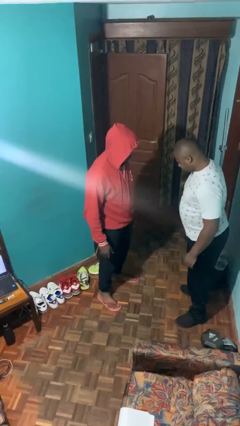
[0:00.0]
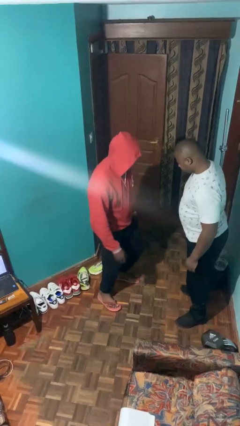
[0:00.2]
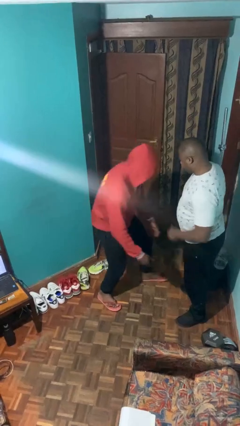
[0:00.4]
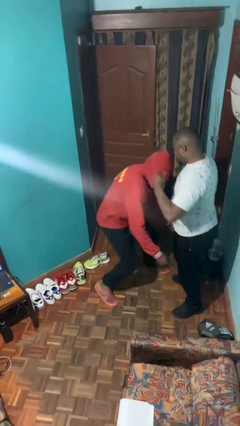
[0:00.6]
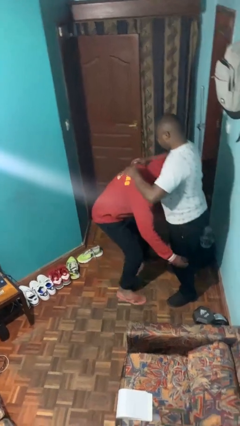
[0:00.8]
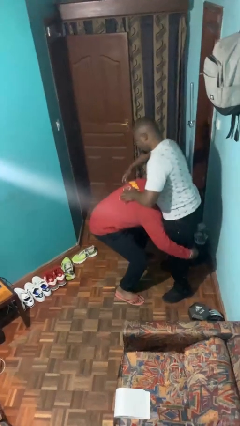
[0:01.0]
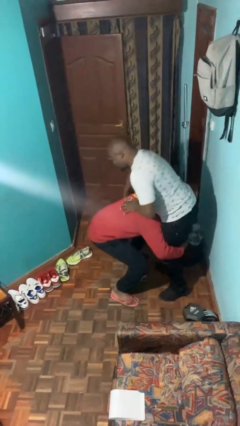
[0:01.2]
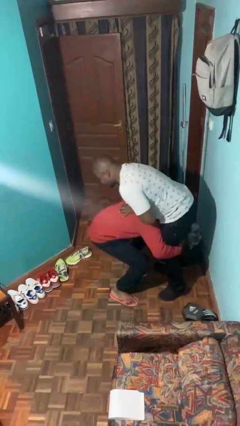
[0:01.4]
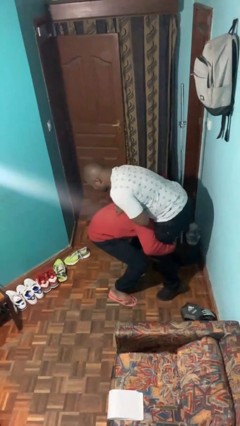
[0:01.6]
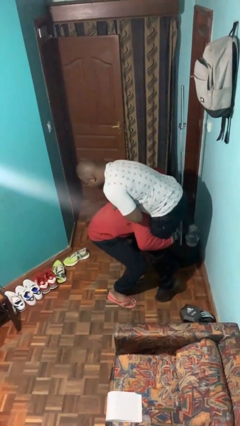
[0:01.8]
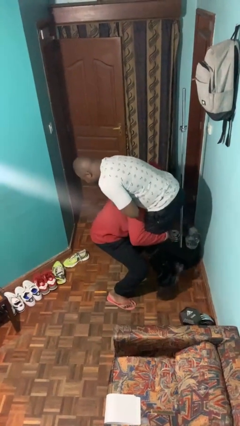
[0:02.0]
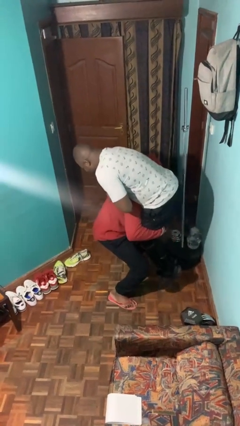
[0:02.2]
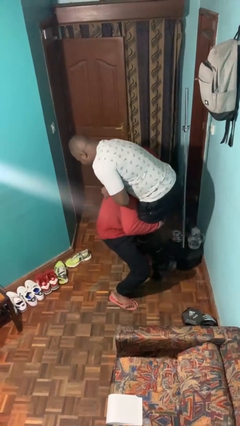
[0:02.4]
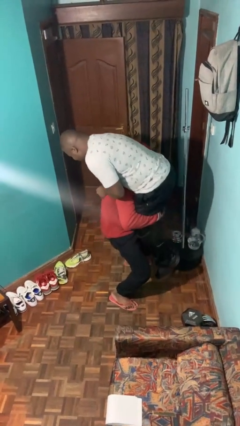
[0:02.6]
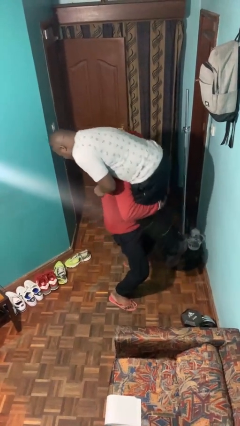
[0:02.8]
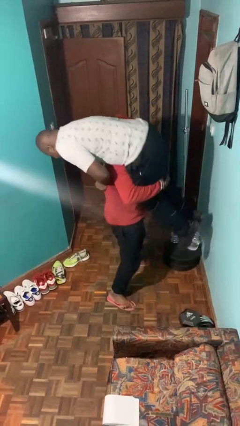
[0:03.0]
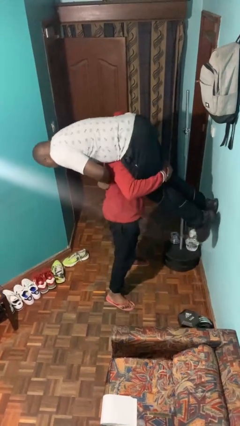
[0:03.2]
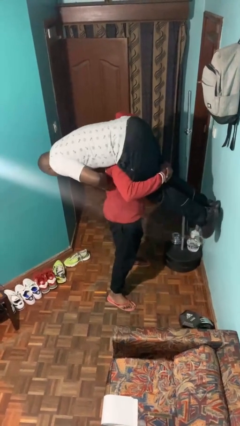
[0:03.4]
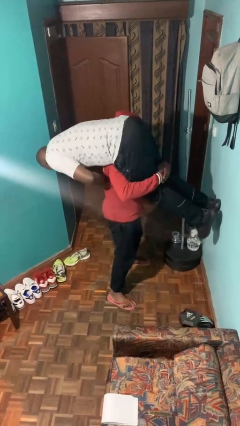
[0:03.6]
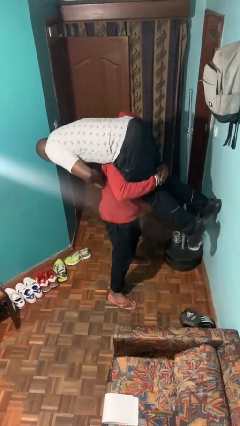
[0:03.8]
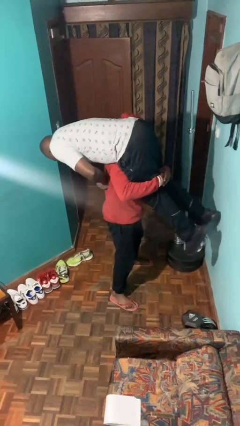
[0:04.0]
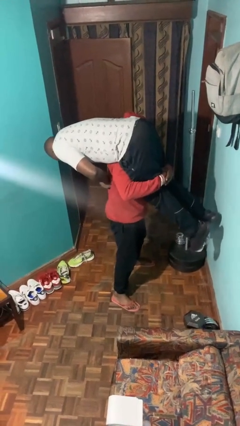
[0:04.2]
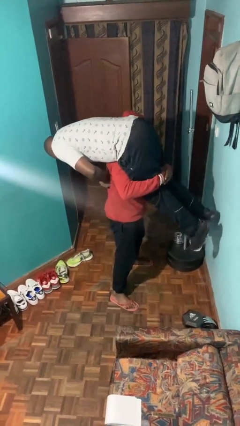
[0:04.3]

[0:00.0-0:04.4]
person carries person over shoulder

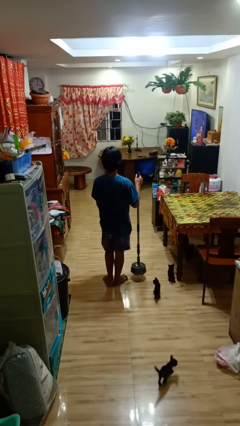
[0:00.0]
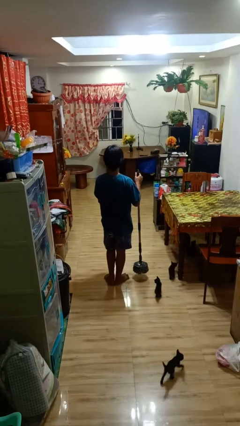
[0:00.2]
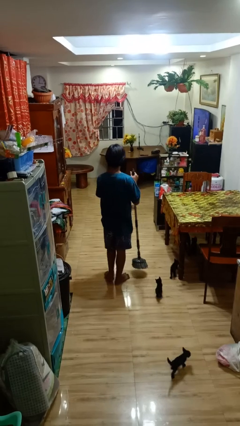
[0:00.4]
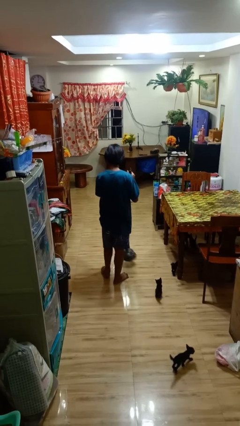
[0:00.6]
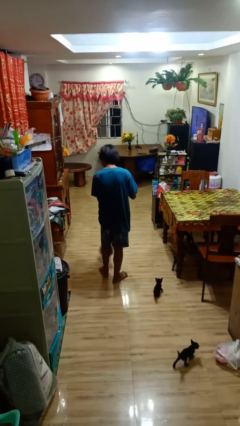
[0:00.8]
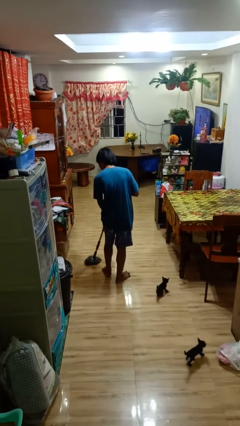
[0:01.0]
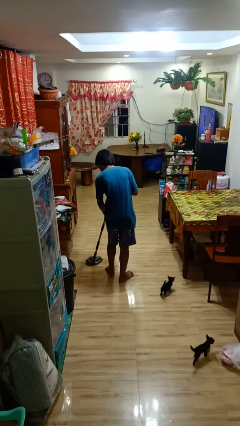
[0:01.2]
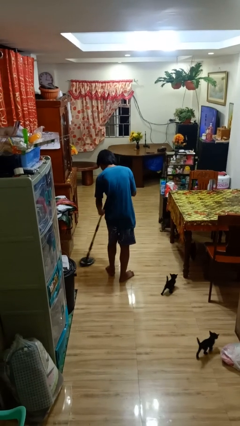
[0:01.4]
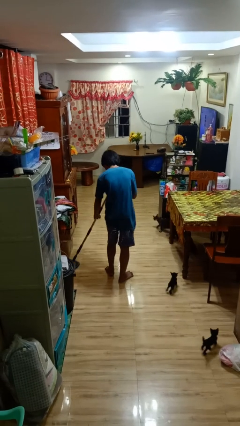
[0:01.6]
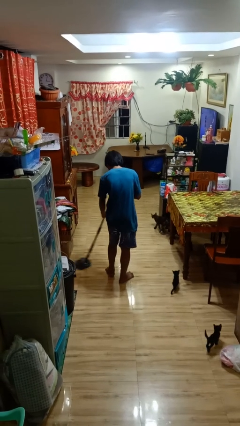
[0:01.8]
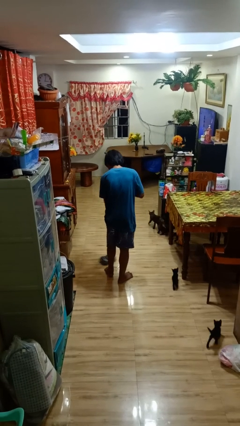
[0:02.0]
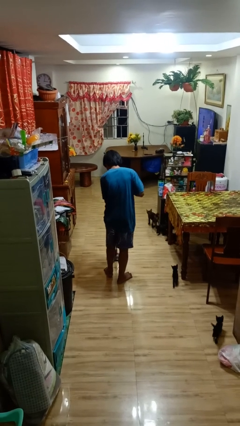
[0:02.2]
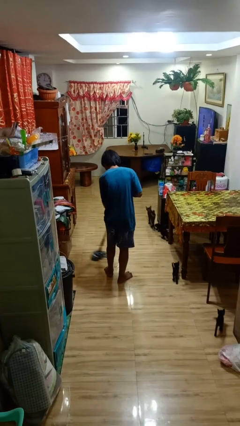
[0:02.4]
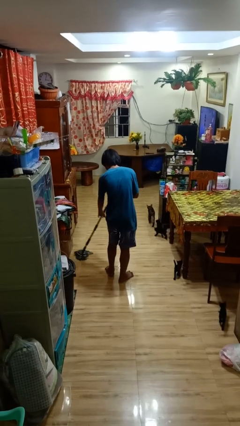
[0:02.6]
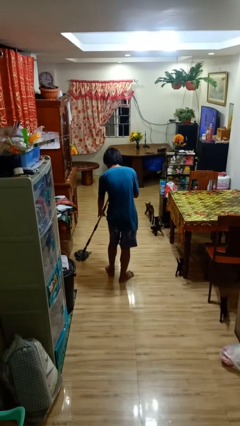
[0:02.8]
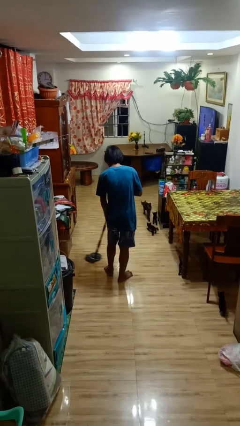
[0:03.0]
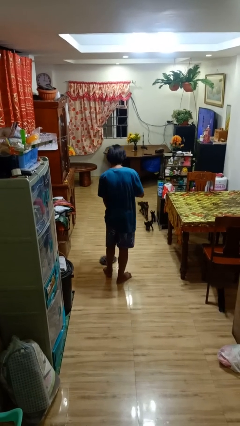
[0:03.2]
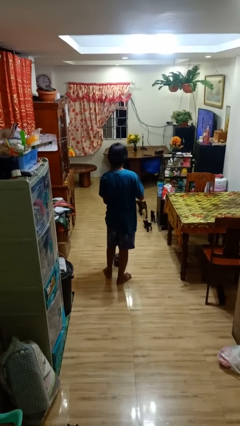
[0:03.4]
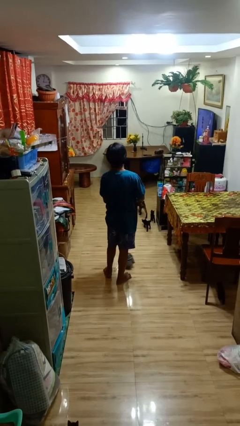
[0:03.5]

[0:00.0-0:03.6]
person mops

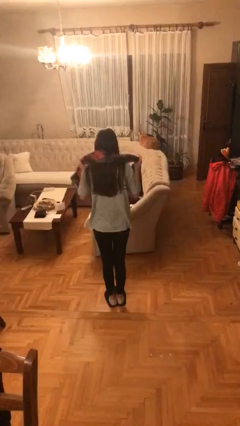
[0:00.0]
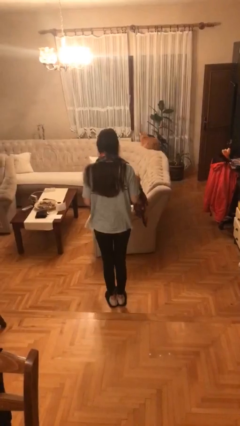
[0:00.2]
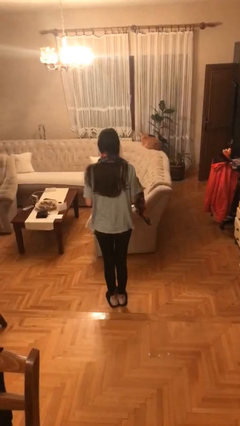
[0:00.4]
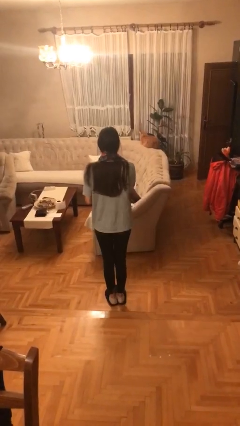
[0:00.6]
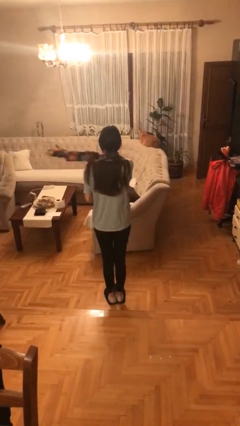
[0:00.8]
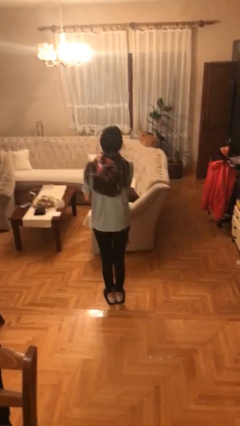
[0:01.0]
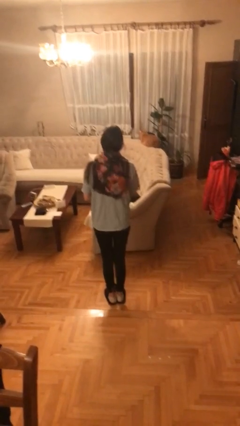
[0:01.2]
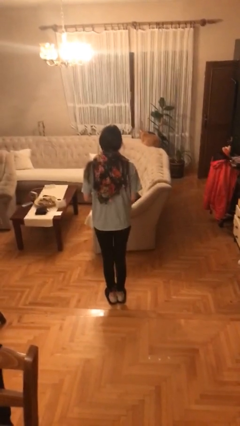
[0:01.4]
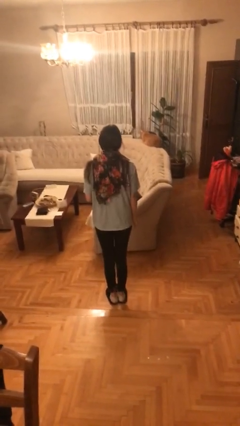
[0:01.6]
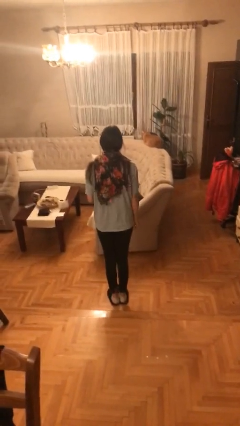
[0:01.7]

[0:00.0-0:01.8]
person puts on scarf

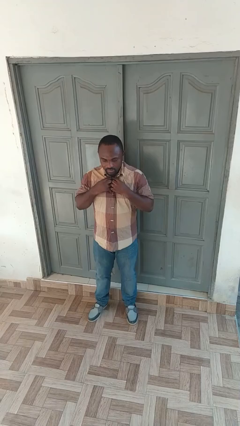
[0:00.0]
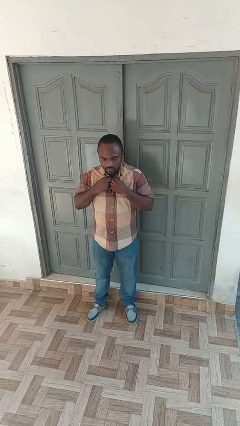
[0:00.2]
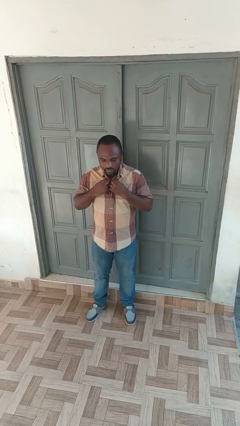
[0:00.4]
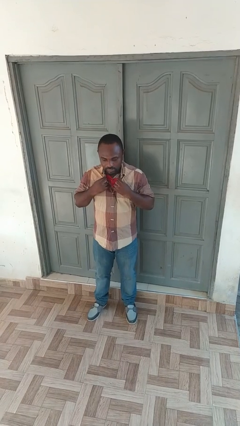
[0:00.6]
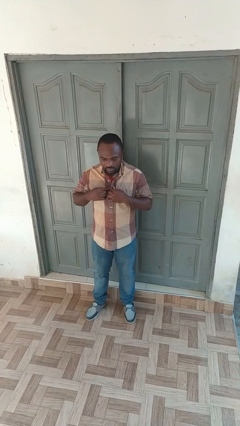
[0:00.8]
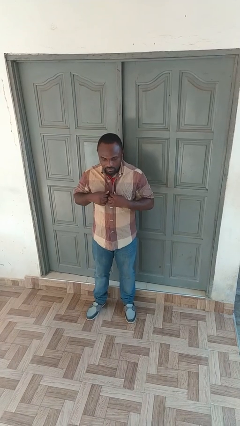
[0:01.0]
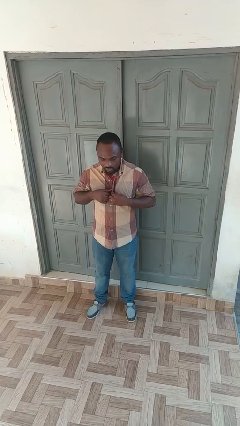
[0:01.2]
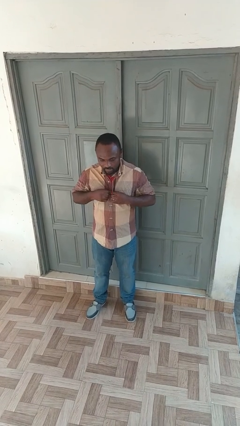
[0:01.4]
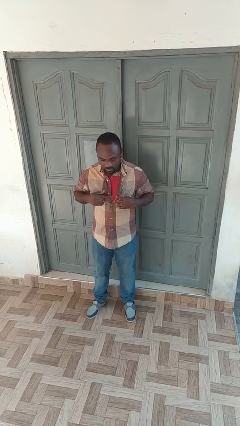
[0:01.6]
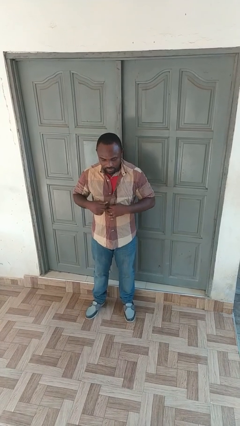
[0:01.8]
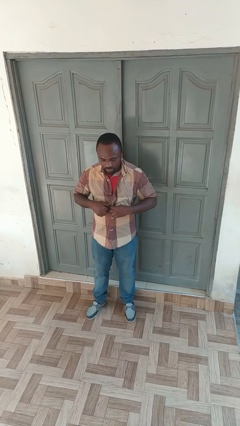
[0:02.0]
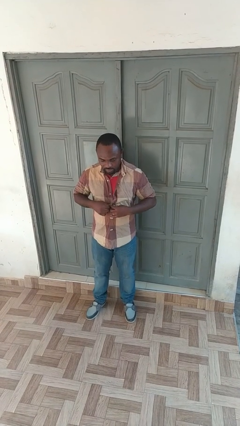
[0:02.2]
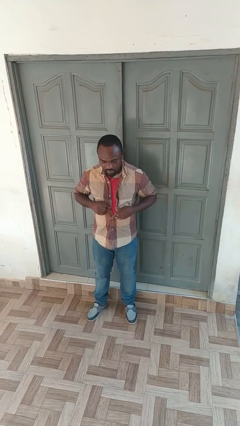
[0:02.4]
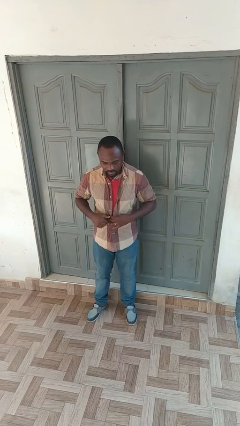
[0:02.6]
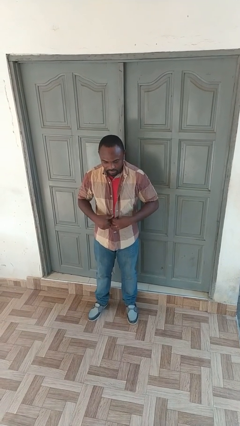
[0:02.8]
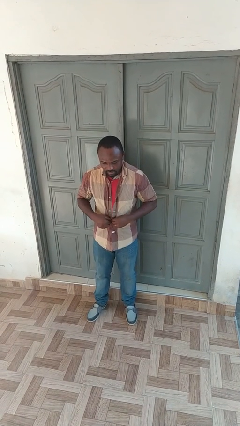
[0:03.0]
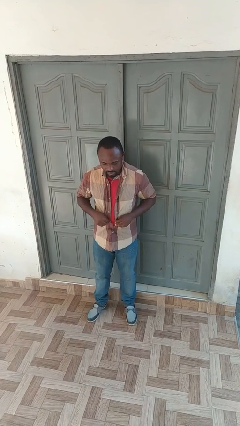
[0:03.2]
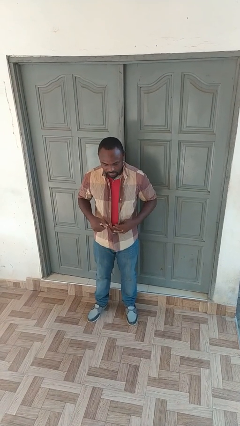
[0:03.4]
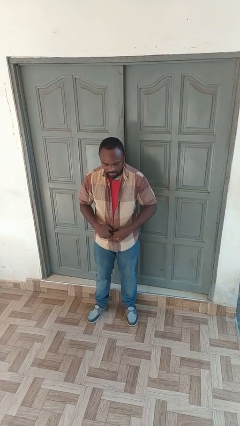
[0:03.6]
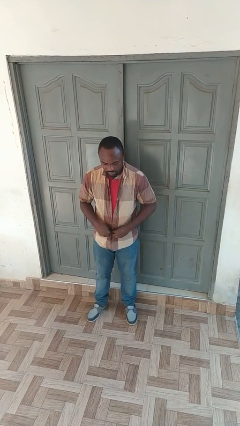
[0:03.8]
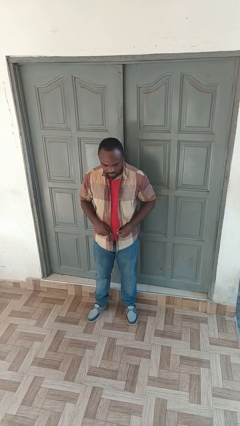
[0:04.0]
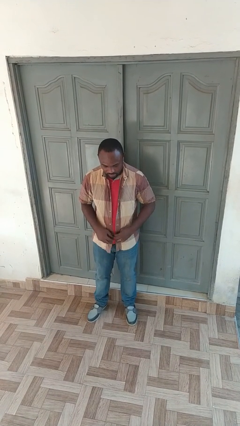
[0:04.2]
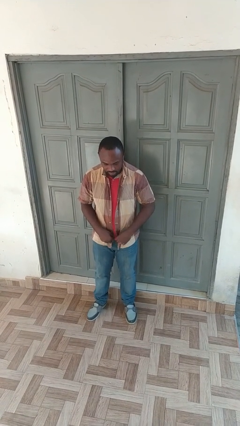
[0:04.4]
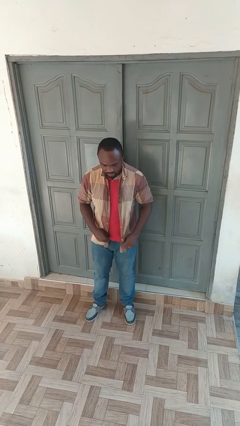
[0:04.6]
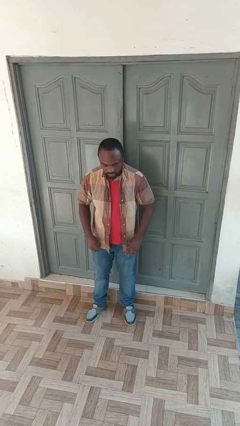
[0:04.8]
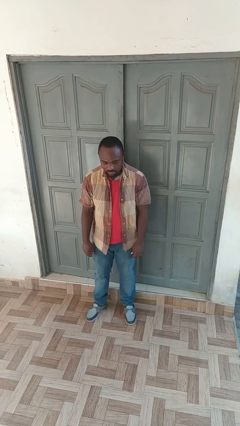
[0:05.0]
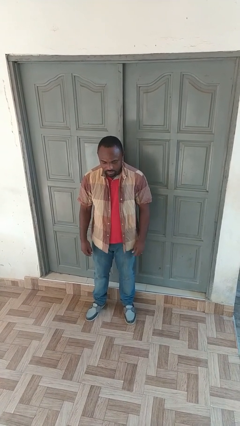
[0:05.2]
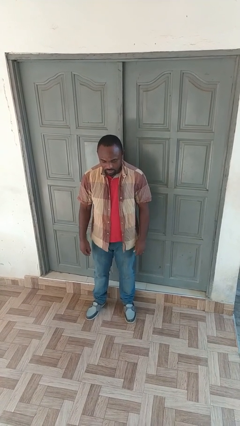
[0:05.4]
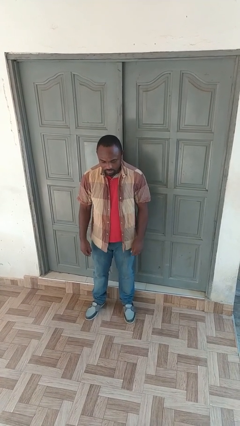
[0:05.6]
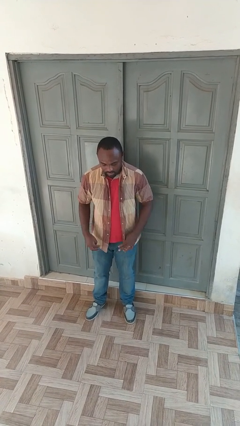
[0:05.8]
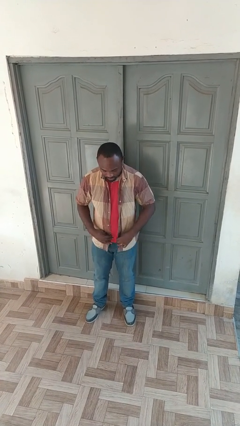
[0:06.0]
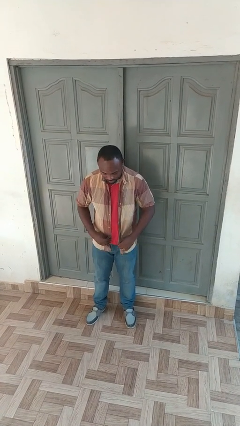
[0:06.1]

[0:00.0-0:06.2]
person unbuttons shirt

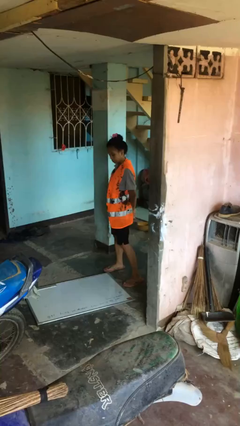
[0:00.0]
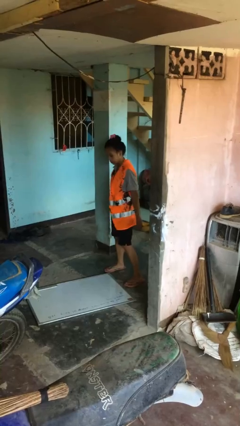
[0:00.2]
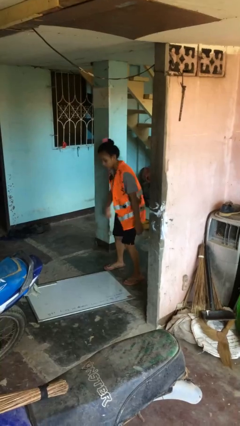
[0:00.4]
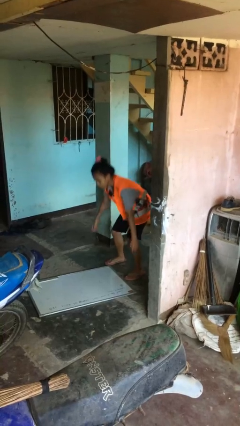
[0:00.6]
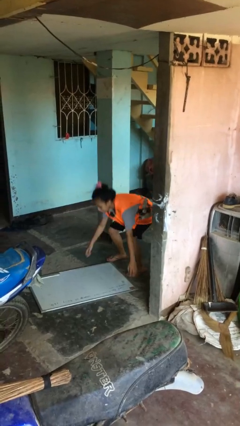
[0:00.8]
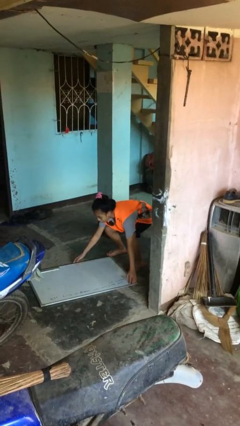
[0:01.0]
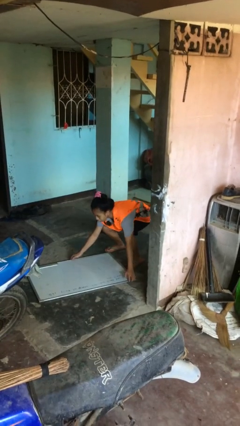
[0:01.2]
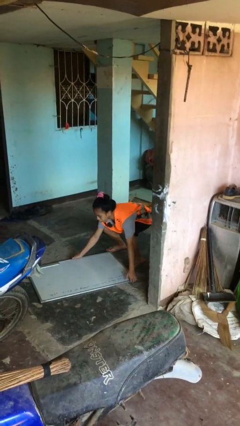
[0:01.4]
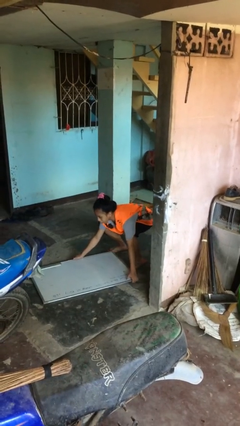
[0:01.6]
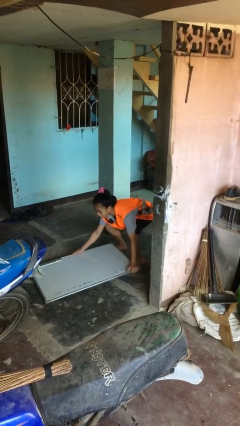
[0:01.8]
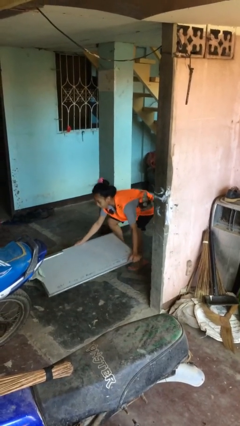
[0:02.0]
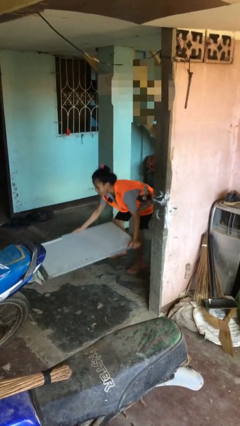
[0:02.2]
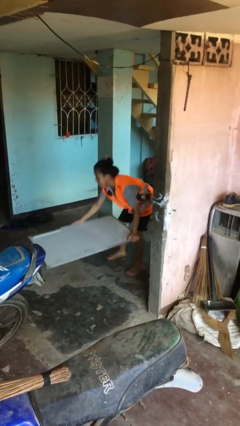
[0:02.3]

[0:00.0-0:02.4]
person picks up object from floor
